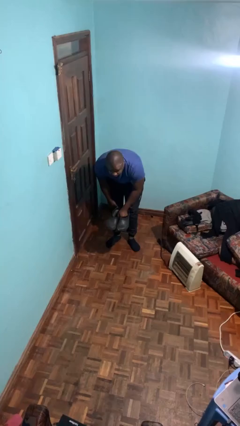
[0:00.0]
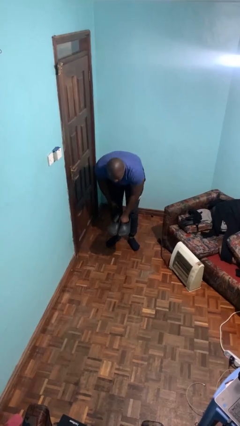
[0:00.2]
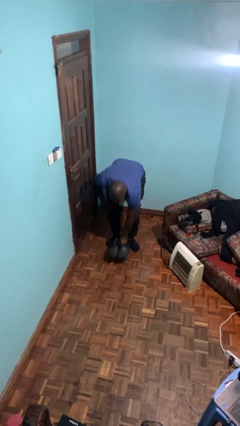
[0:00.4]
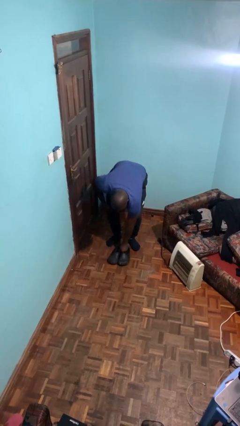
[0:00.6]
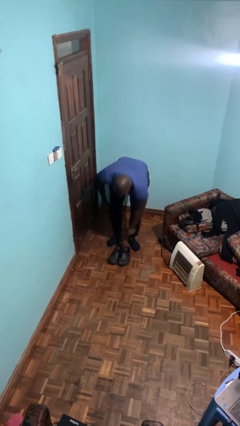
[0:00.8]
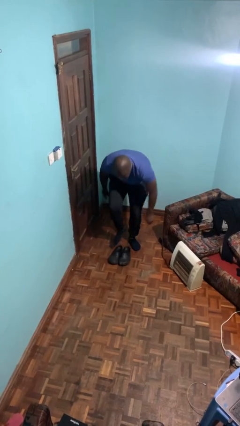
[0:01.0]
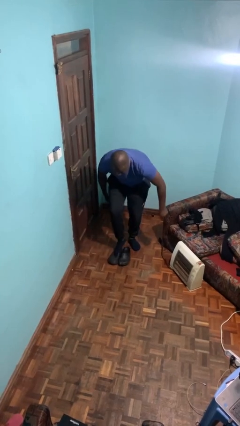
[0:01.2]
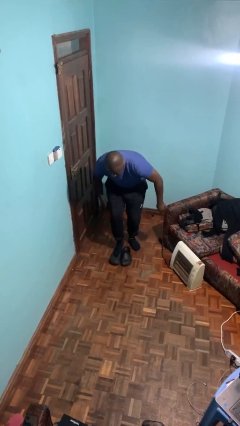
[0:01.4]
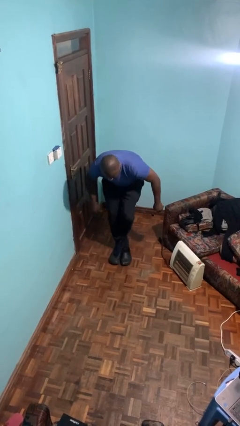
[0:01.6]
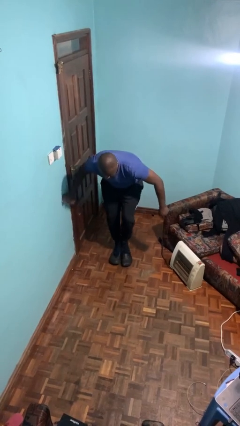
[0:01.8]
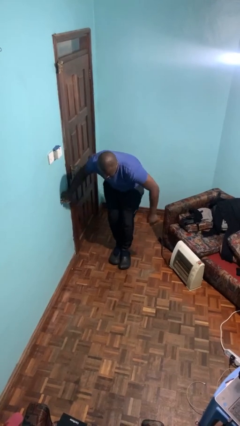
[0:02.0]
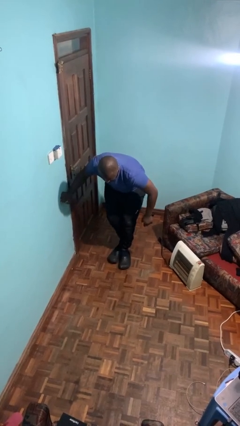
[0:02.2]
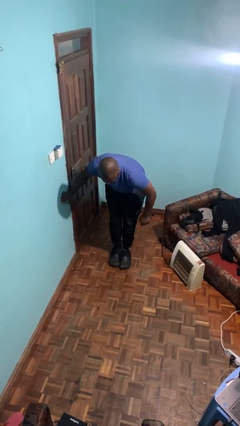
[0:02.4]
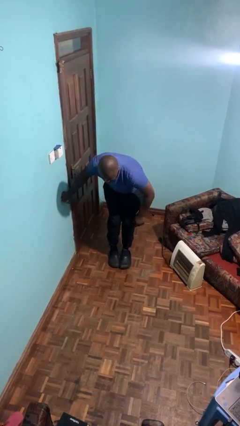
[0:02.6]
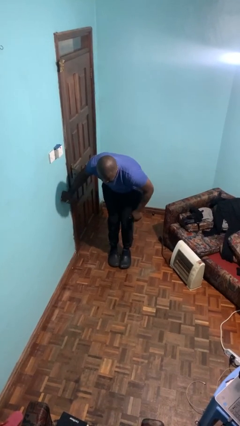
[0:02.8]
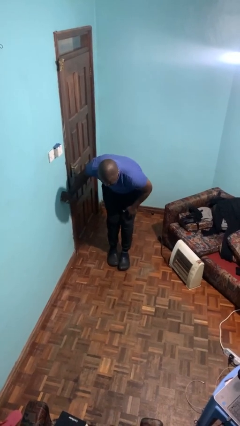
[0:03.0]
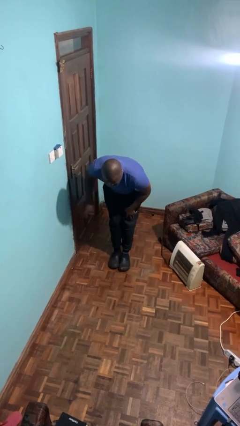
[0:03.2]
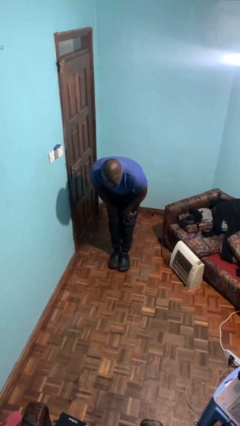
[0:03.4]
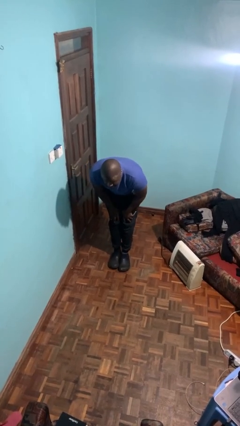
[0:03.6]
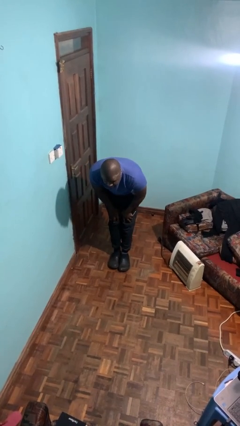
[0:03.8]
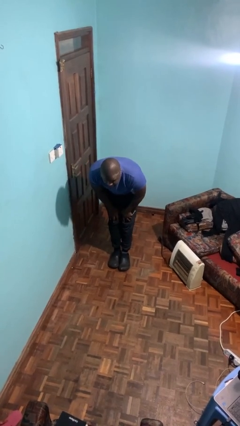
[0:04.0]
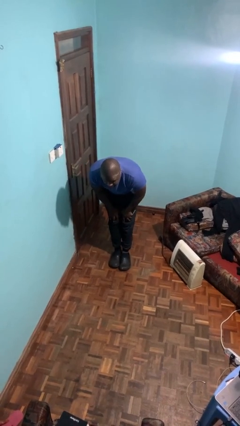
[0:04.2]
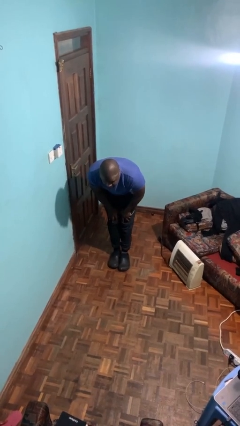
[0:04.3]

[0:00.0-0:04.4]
person puts on shoes

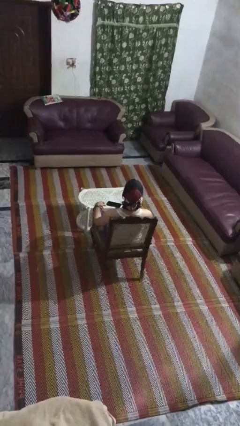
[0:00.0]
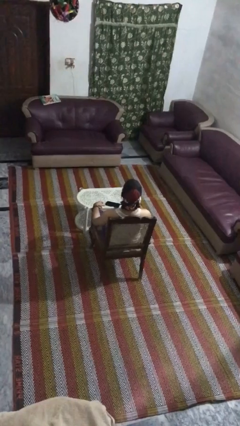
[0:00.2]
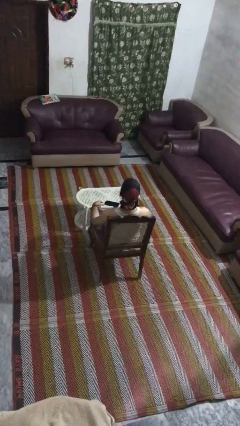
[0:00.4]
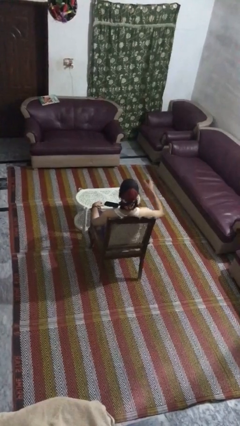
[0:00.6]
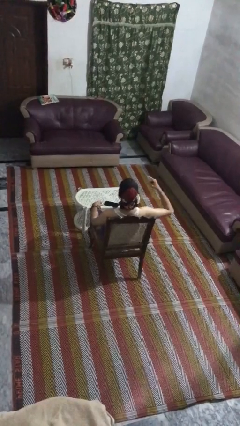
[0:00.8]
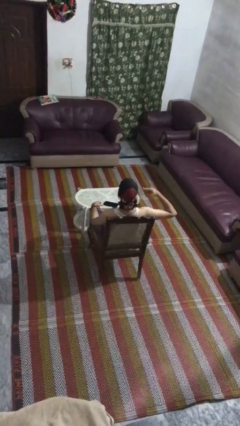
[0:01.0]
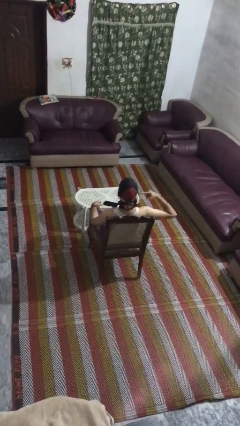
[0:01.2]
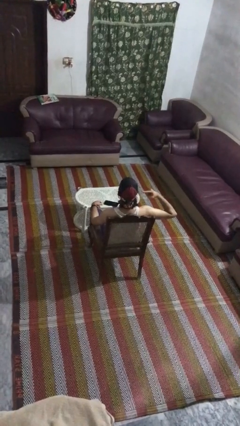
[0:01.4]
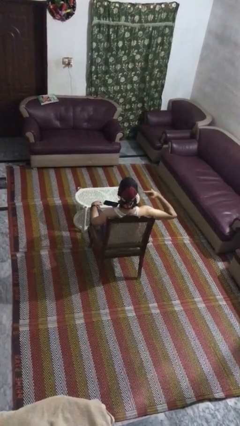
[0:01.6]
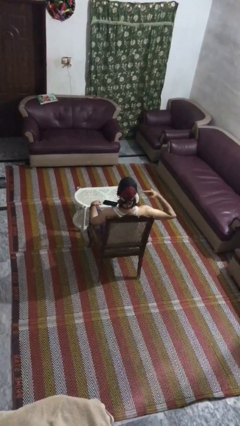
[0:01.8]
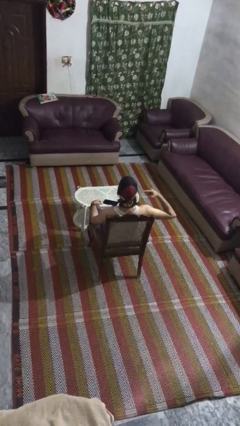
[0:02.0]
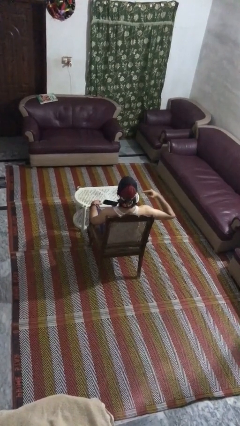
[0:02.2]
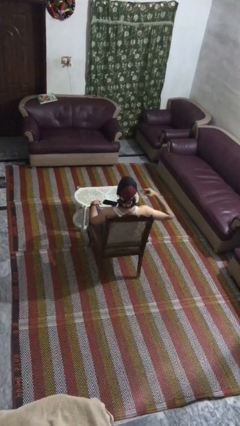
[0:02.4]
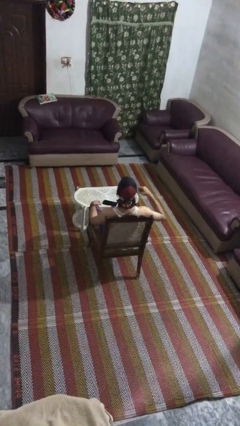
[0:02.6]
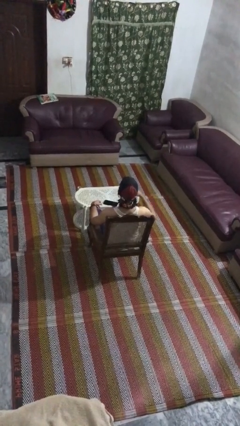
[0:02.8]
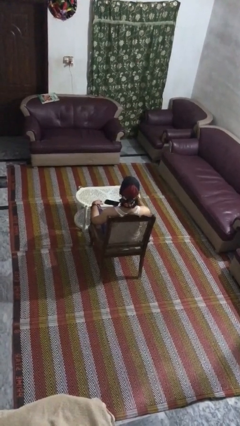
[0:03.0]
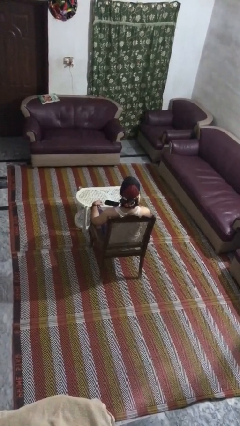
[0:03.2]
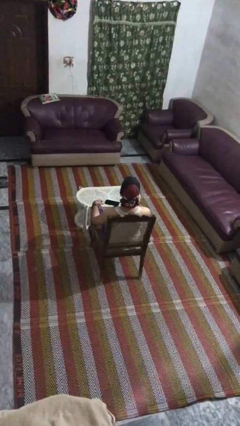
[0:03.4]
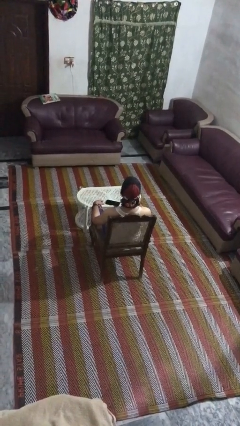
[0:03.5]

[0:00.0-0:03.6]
person gestures listen closely

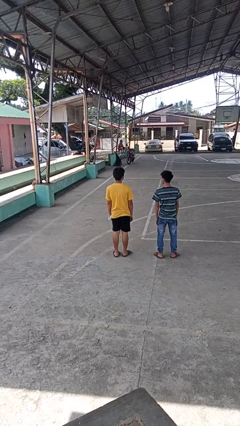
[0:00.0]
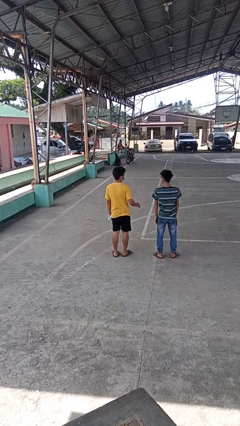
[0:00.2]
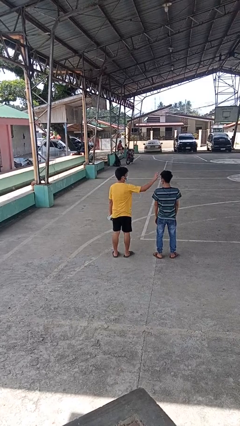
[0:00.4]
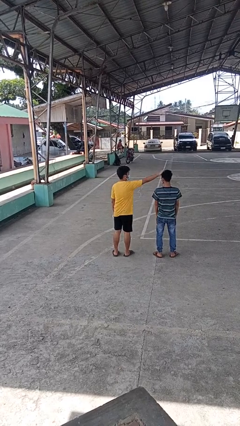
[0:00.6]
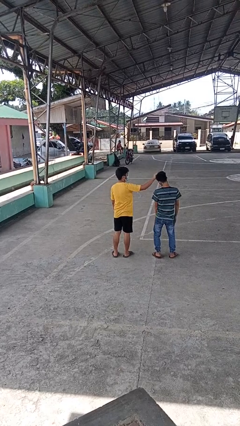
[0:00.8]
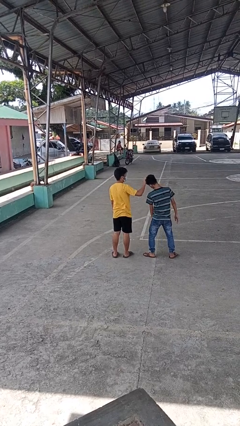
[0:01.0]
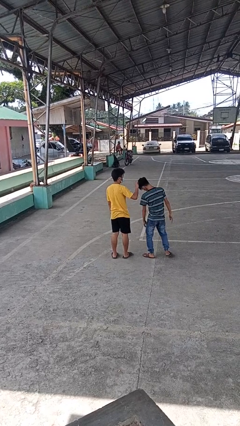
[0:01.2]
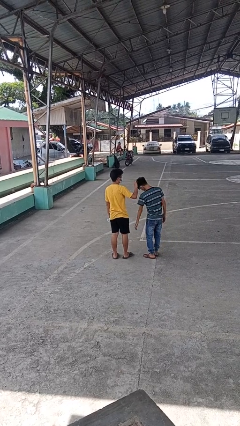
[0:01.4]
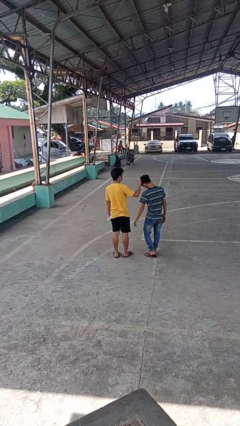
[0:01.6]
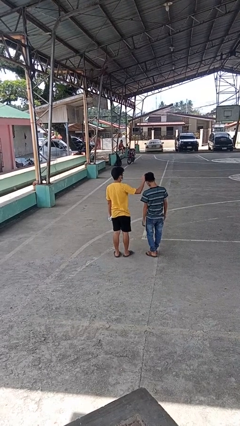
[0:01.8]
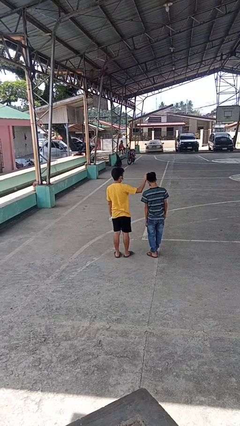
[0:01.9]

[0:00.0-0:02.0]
person grabs person by hair

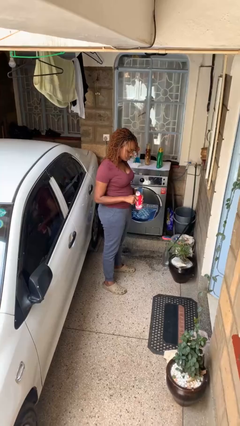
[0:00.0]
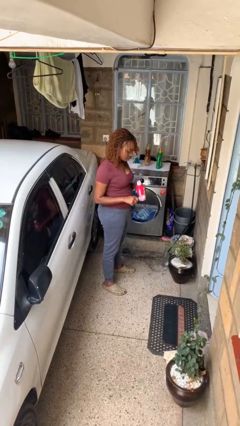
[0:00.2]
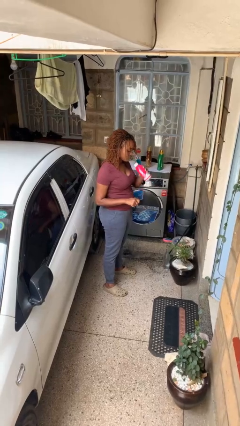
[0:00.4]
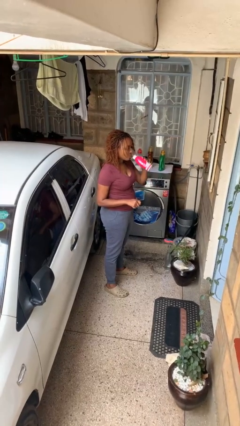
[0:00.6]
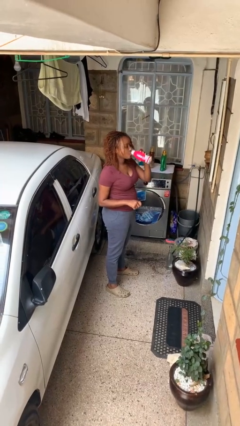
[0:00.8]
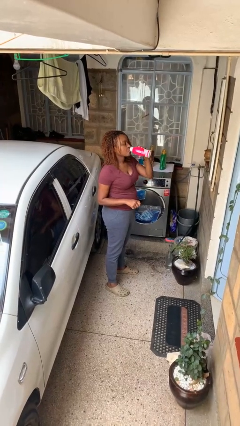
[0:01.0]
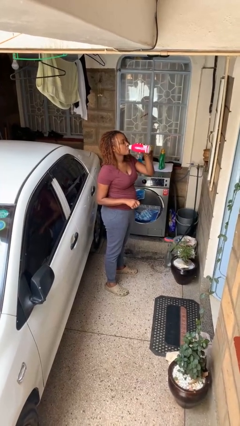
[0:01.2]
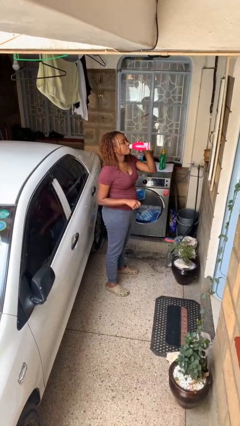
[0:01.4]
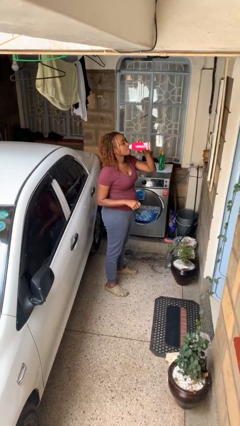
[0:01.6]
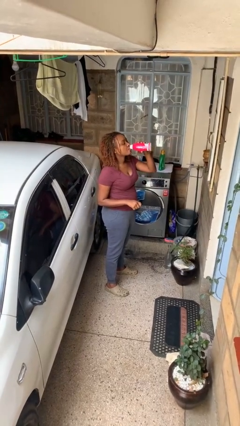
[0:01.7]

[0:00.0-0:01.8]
person drinks from beverage can

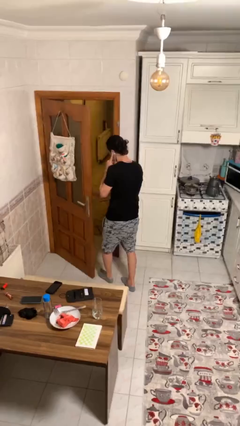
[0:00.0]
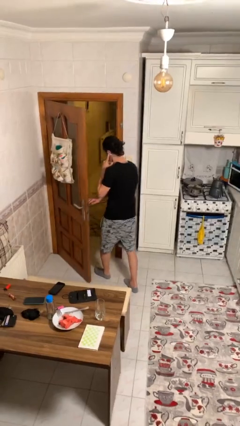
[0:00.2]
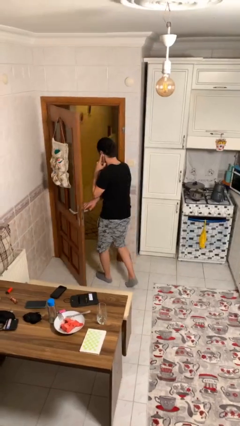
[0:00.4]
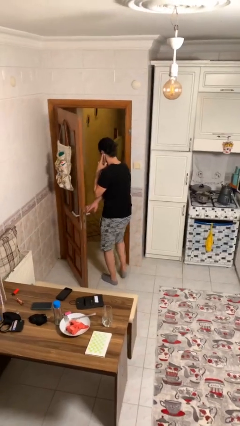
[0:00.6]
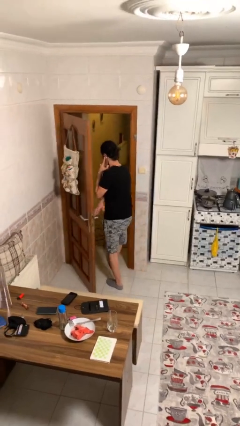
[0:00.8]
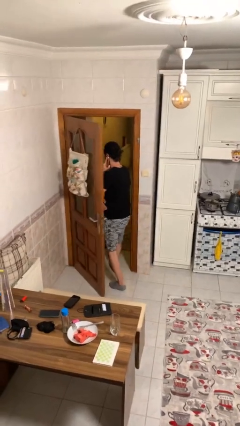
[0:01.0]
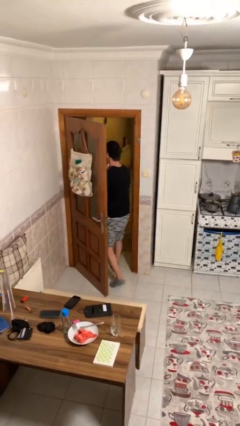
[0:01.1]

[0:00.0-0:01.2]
person exits scene through structure

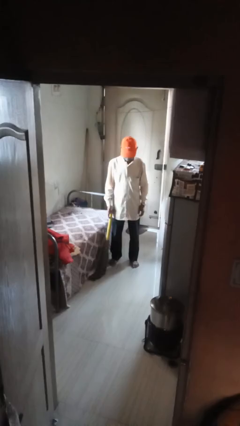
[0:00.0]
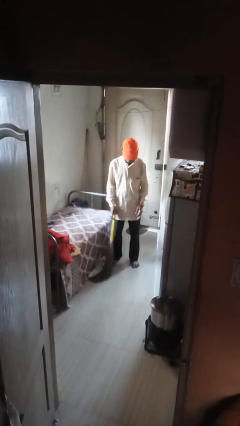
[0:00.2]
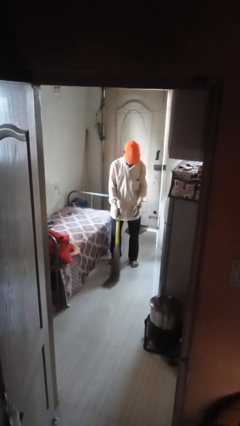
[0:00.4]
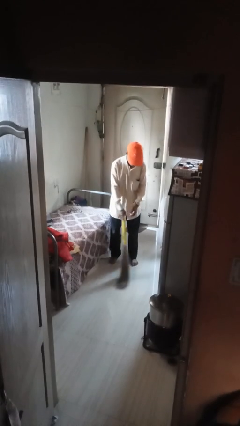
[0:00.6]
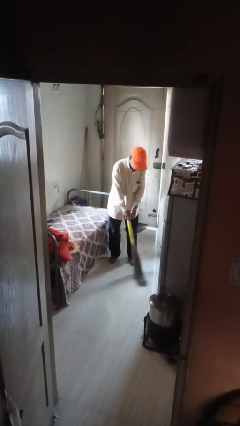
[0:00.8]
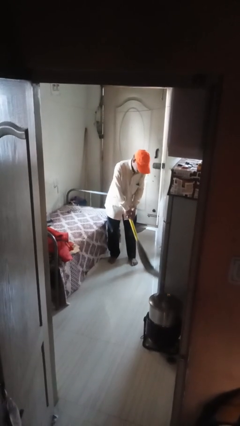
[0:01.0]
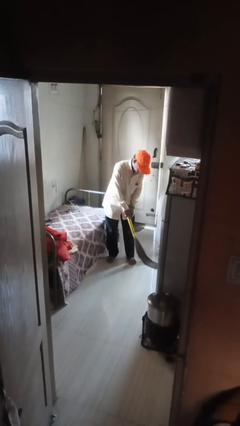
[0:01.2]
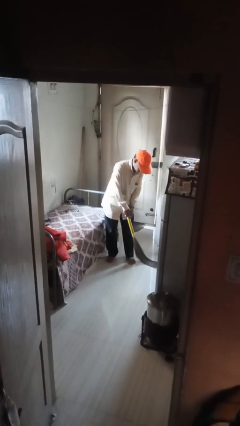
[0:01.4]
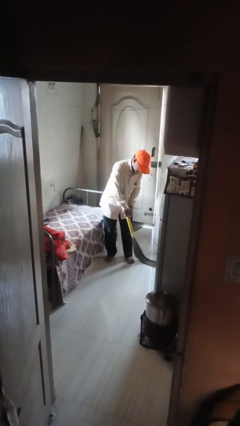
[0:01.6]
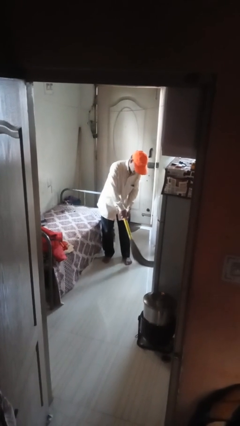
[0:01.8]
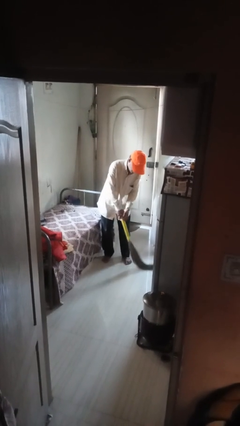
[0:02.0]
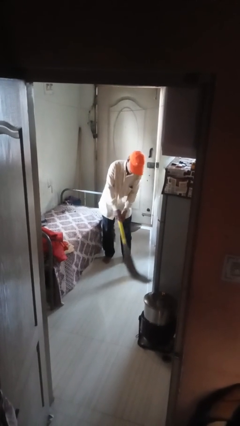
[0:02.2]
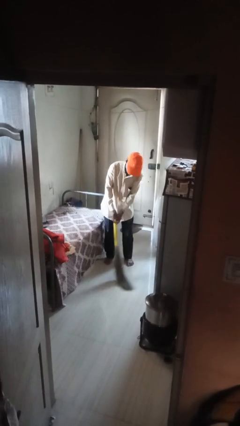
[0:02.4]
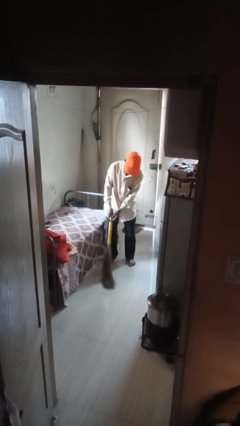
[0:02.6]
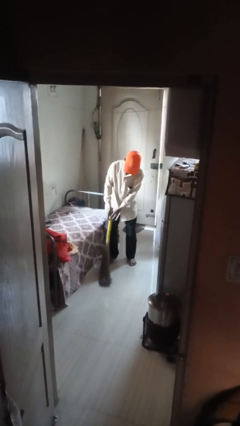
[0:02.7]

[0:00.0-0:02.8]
person sweeps floor

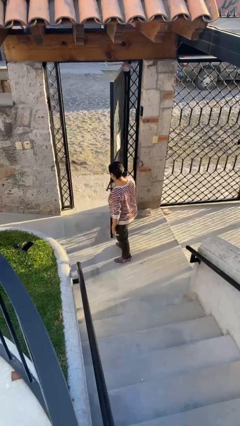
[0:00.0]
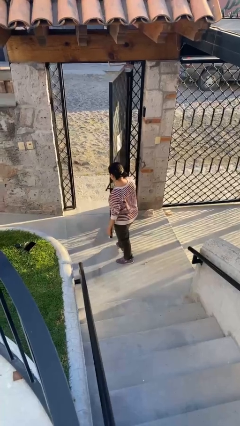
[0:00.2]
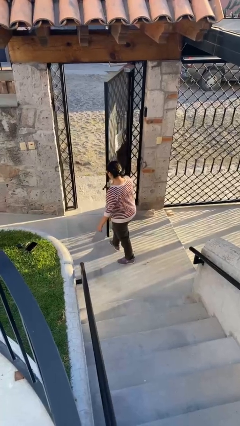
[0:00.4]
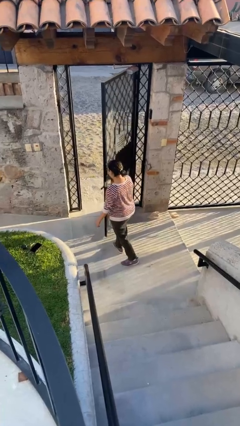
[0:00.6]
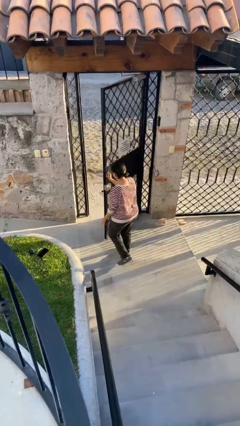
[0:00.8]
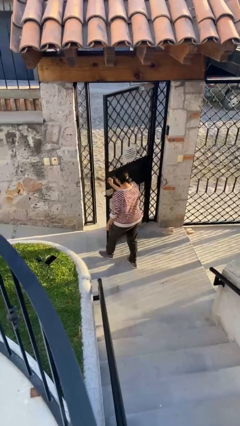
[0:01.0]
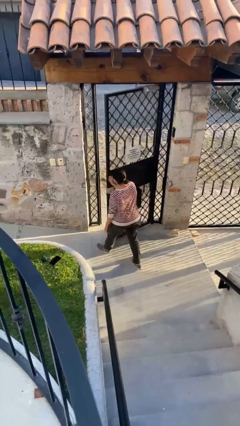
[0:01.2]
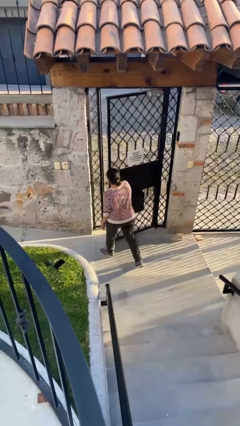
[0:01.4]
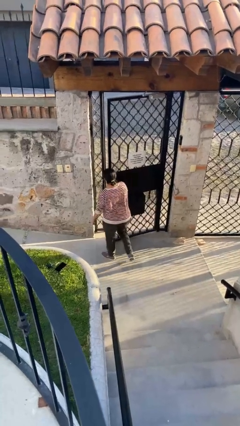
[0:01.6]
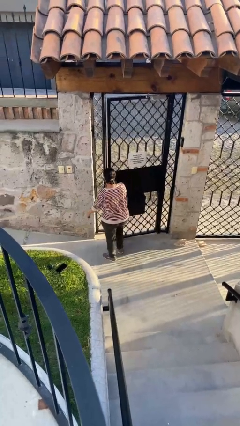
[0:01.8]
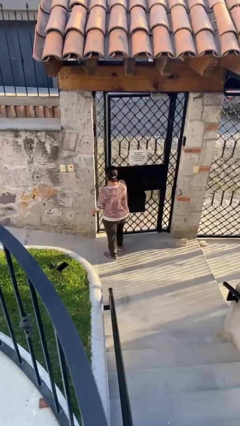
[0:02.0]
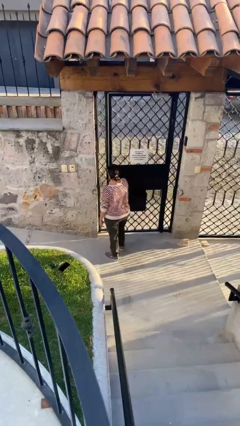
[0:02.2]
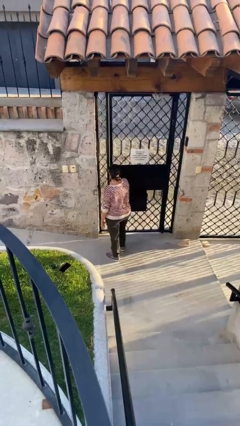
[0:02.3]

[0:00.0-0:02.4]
person closes facility door
